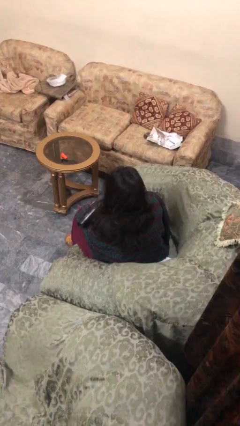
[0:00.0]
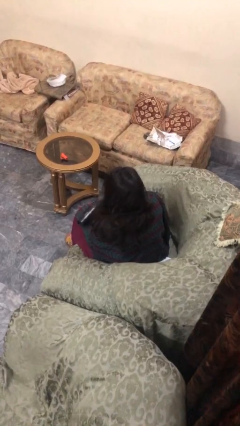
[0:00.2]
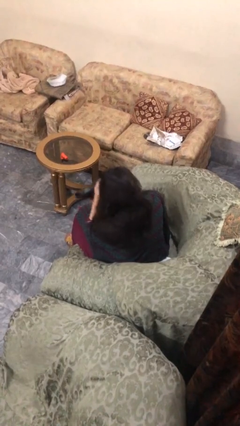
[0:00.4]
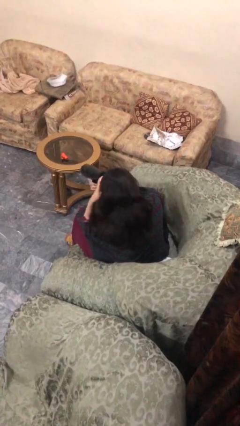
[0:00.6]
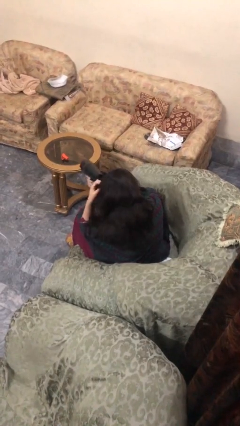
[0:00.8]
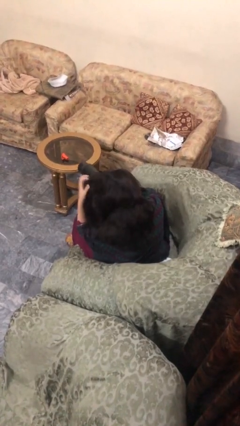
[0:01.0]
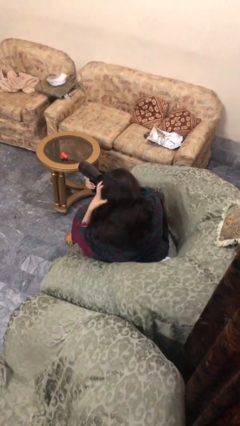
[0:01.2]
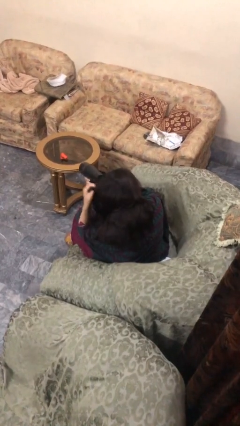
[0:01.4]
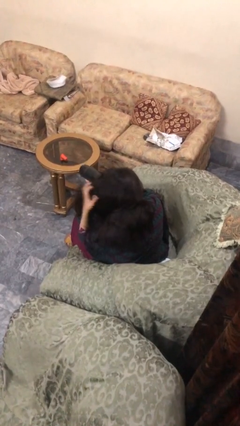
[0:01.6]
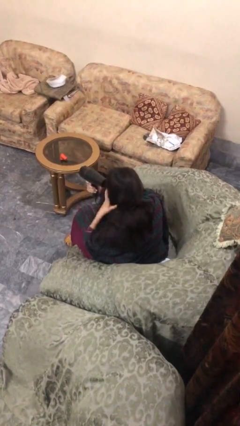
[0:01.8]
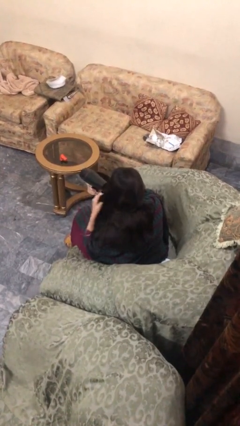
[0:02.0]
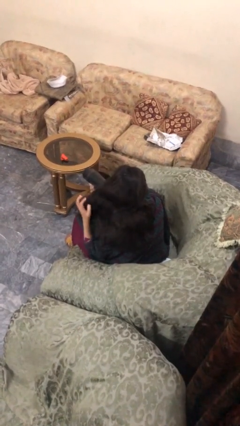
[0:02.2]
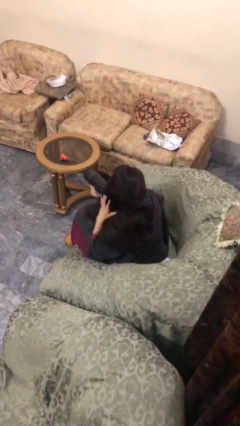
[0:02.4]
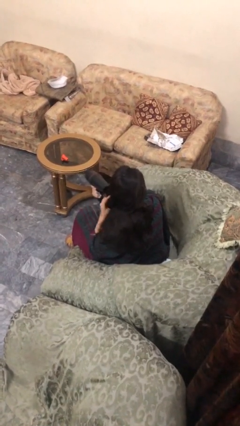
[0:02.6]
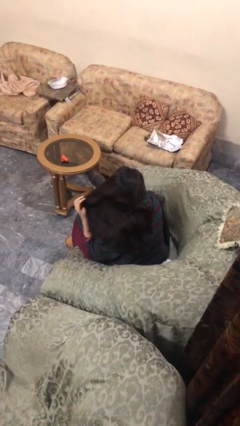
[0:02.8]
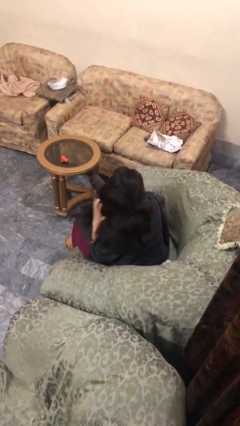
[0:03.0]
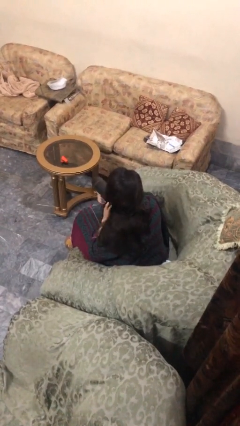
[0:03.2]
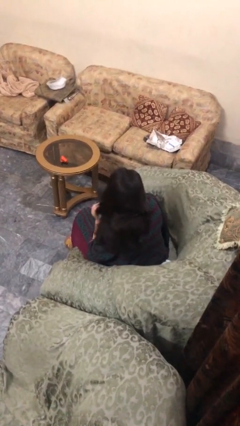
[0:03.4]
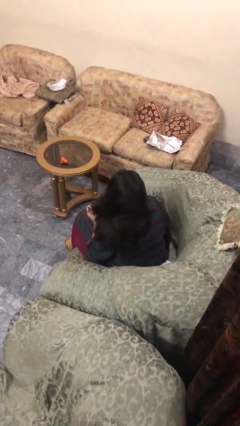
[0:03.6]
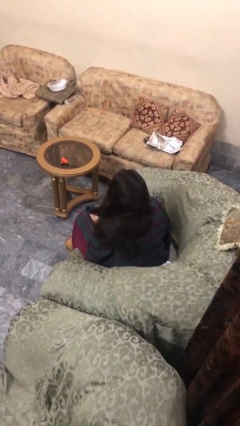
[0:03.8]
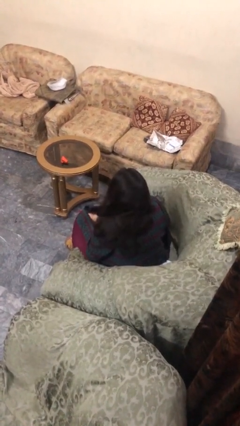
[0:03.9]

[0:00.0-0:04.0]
person dries hair with hairdryer

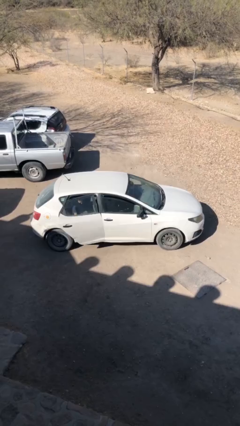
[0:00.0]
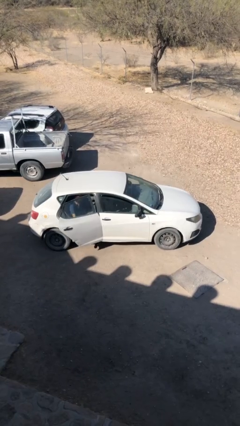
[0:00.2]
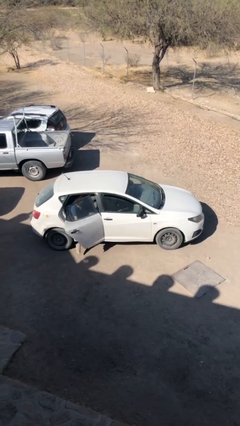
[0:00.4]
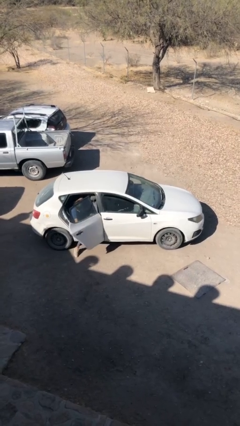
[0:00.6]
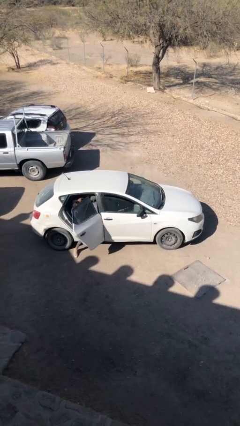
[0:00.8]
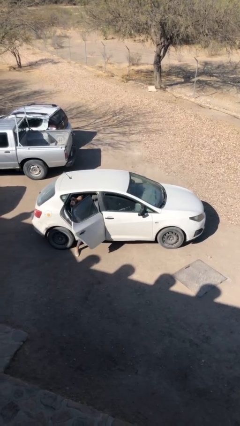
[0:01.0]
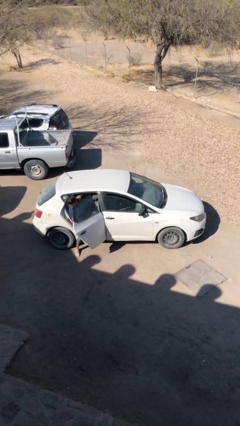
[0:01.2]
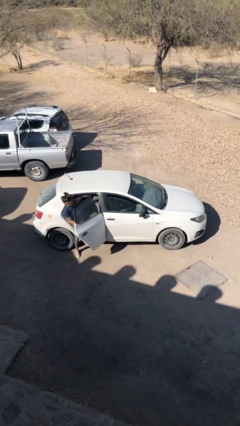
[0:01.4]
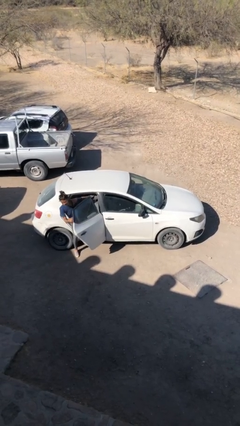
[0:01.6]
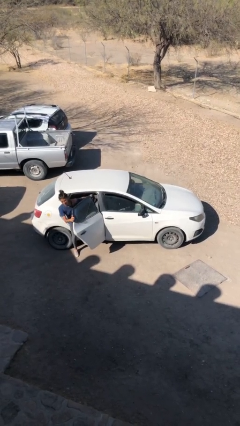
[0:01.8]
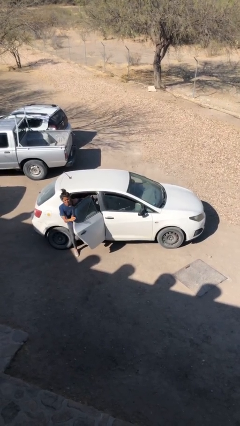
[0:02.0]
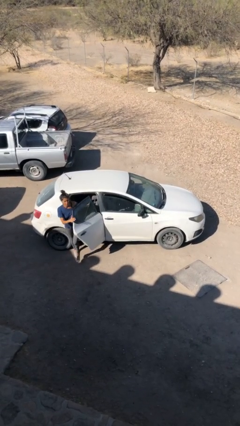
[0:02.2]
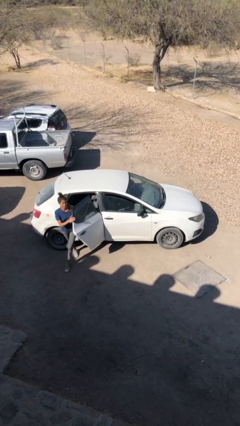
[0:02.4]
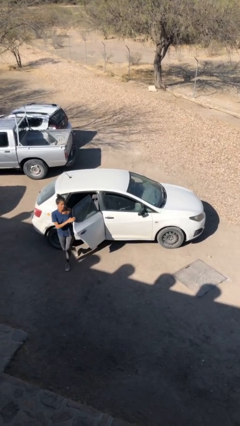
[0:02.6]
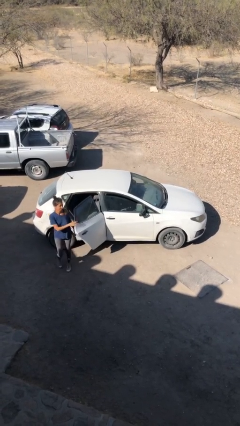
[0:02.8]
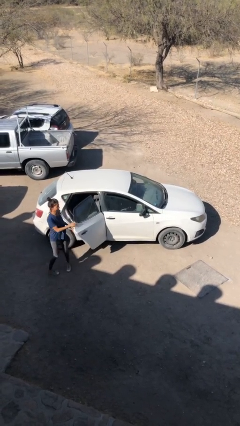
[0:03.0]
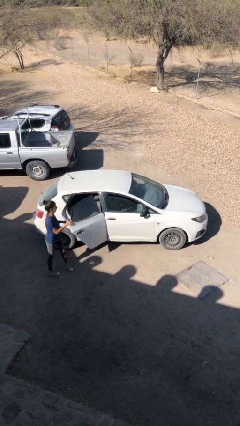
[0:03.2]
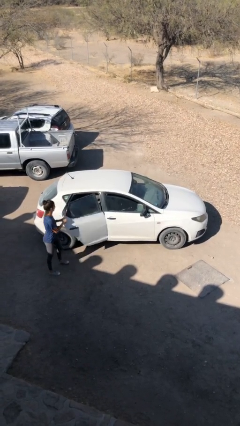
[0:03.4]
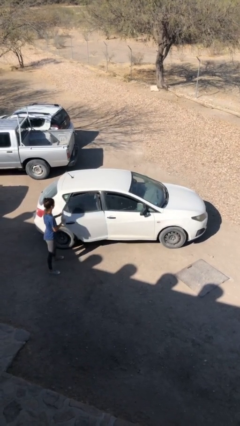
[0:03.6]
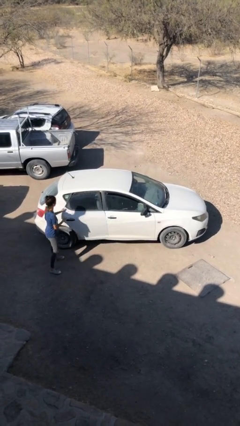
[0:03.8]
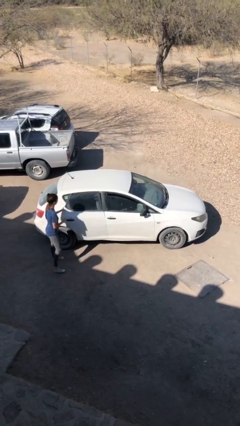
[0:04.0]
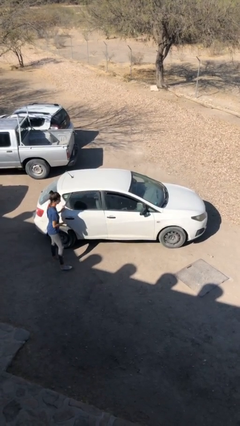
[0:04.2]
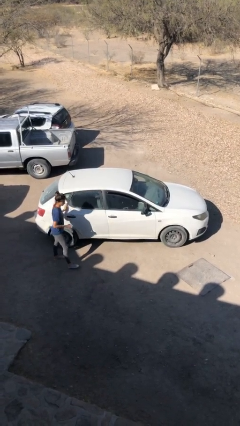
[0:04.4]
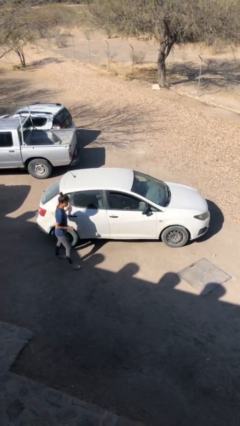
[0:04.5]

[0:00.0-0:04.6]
car drops off person

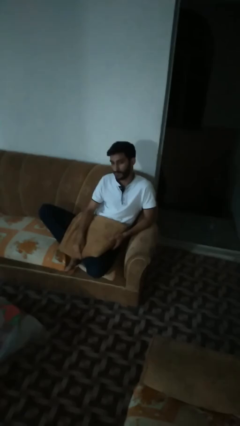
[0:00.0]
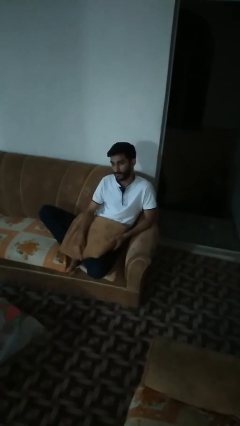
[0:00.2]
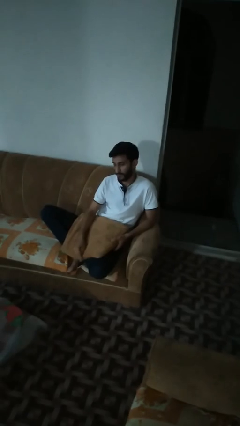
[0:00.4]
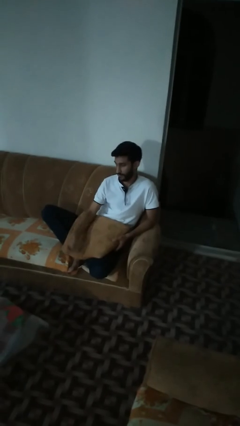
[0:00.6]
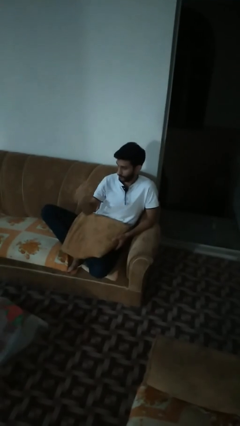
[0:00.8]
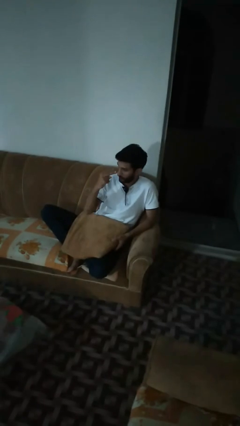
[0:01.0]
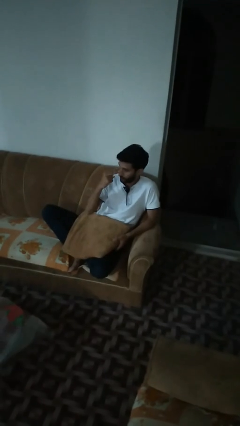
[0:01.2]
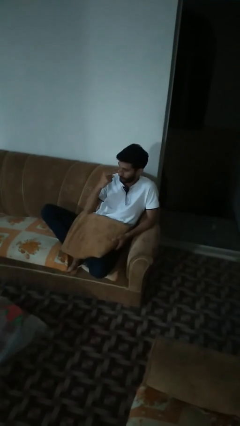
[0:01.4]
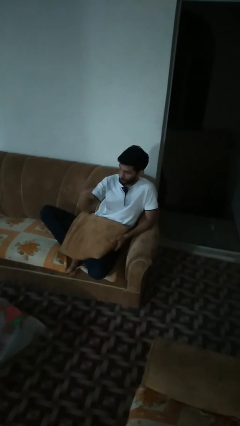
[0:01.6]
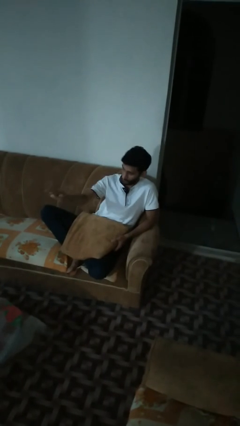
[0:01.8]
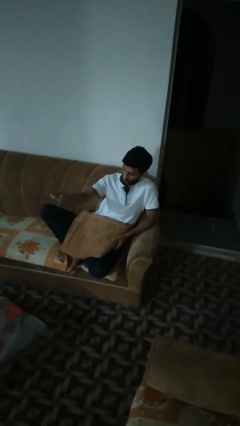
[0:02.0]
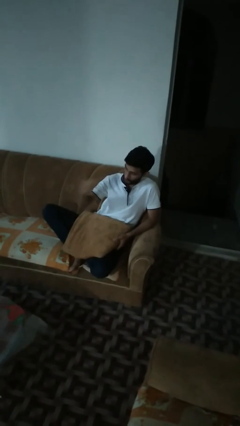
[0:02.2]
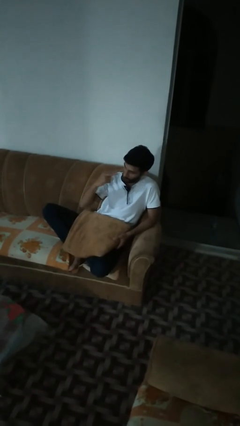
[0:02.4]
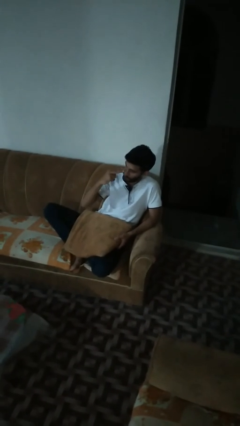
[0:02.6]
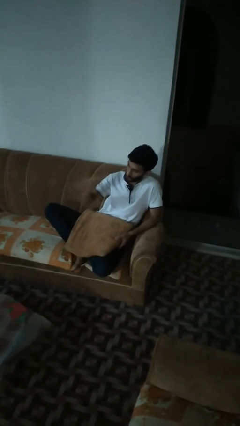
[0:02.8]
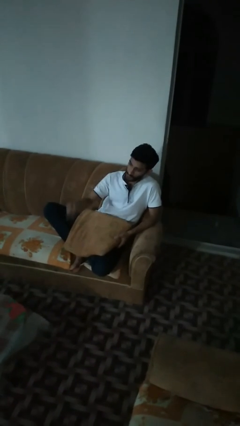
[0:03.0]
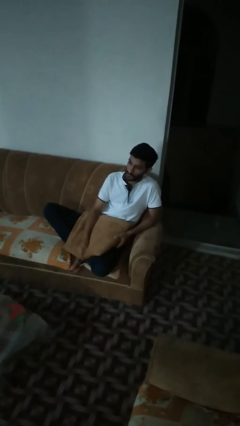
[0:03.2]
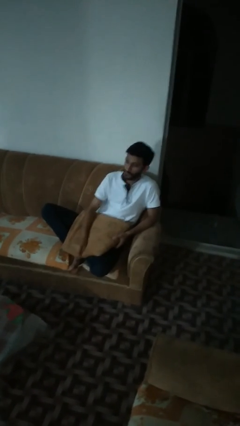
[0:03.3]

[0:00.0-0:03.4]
person gestures watch closely

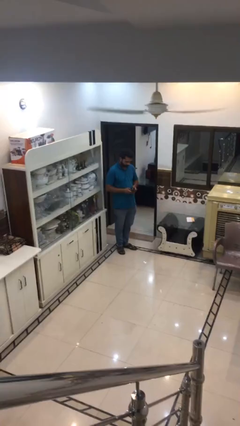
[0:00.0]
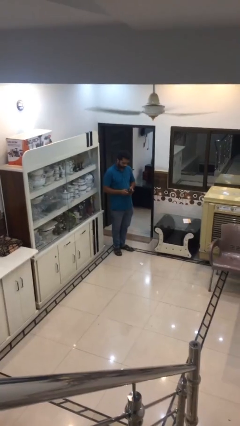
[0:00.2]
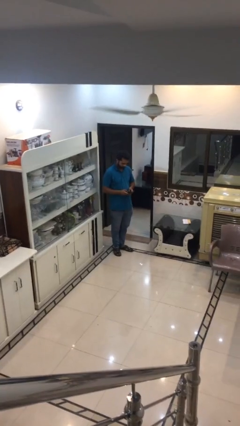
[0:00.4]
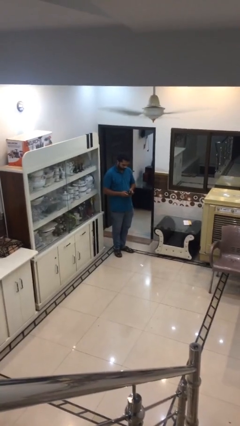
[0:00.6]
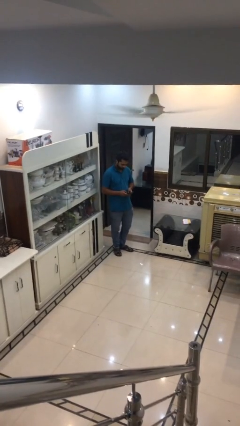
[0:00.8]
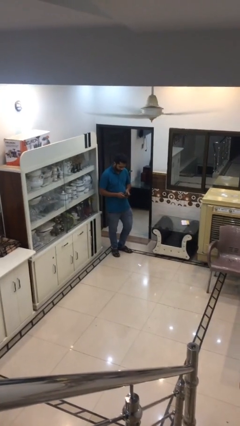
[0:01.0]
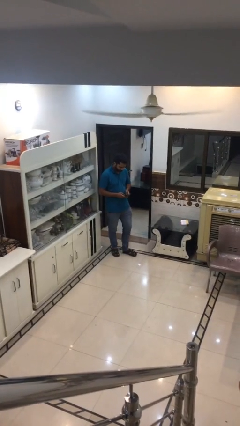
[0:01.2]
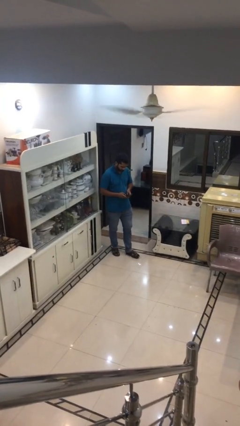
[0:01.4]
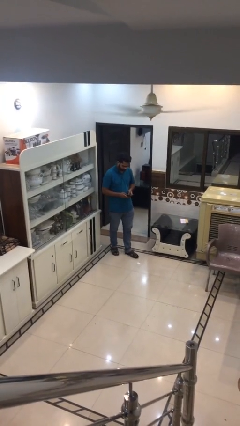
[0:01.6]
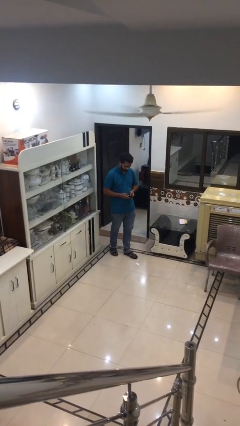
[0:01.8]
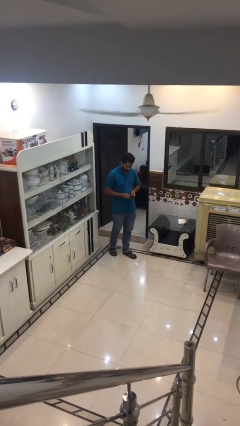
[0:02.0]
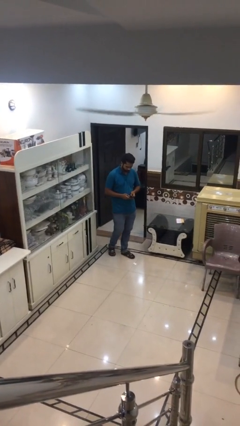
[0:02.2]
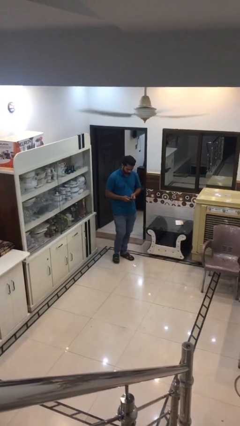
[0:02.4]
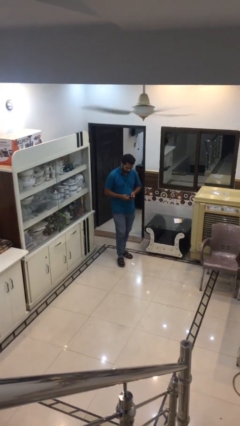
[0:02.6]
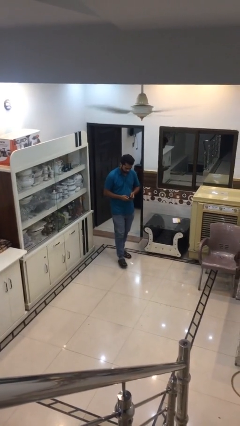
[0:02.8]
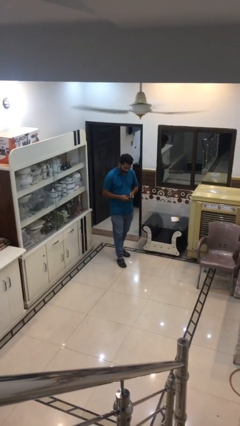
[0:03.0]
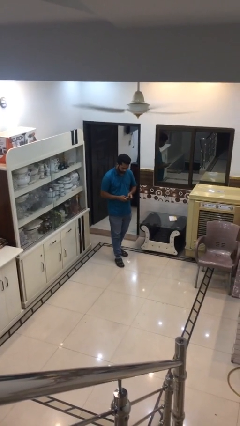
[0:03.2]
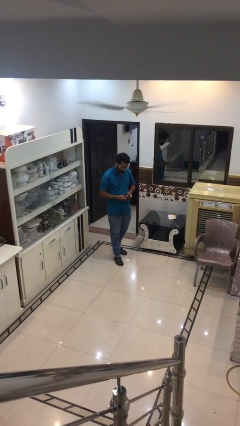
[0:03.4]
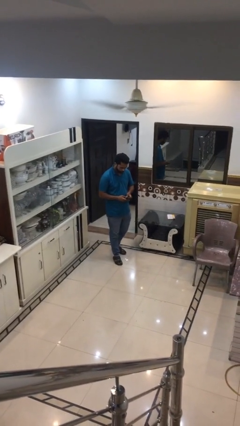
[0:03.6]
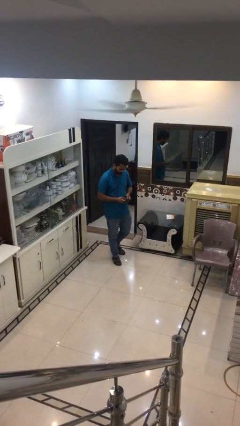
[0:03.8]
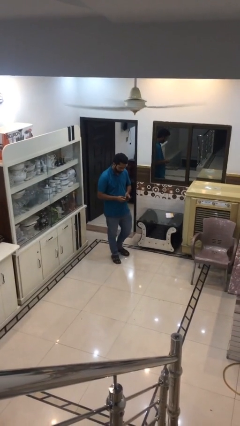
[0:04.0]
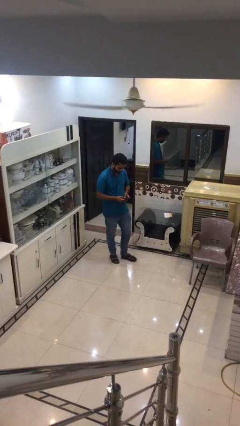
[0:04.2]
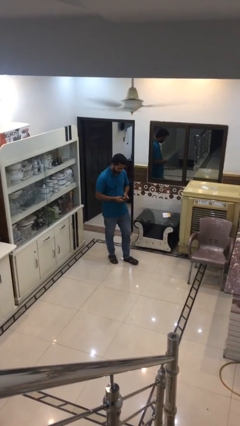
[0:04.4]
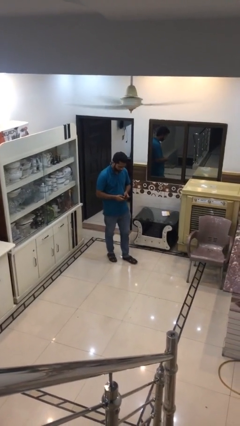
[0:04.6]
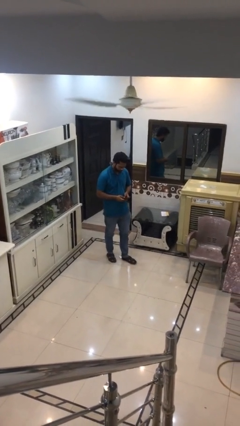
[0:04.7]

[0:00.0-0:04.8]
person texts on phone

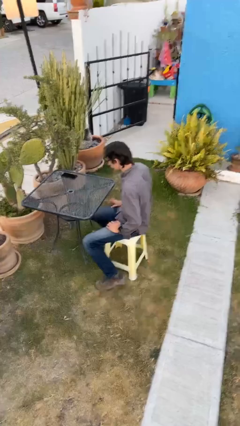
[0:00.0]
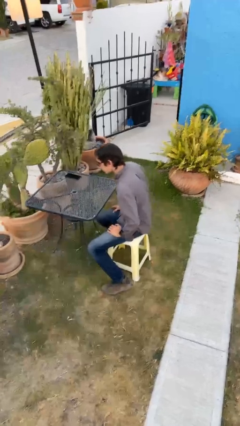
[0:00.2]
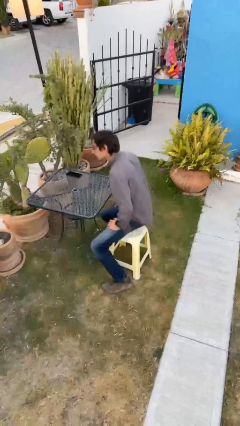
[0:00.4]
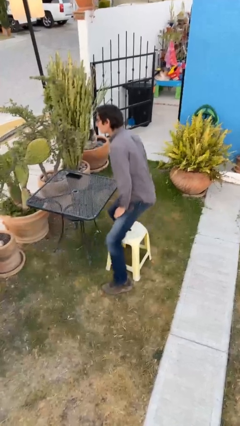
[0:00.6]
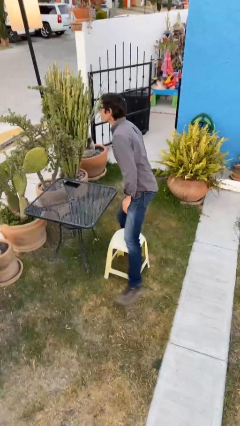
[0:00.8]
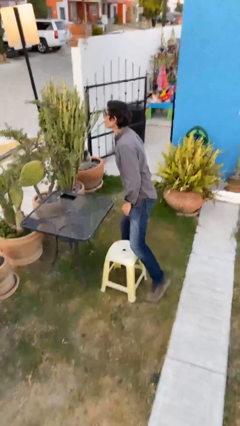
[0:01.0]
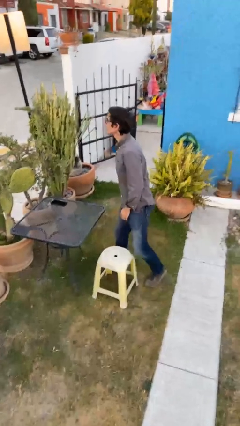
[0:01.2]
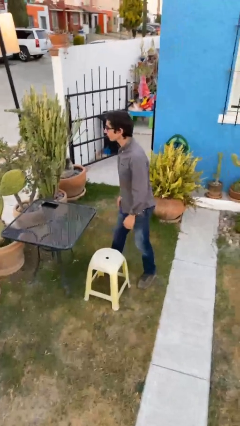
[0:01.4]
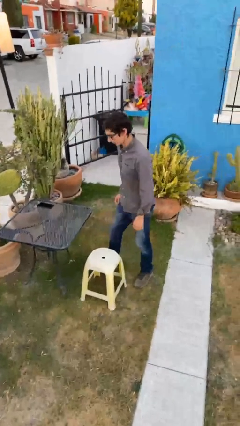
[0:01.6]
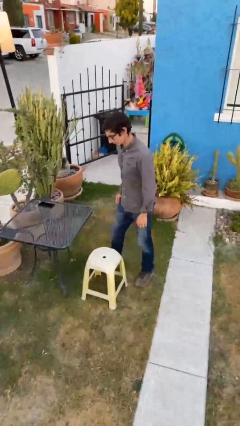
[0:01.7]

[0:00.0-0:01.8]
person stands up
